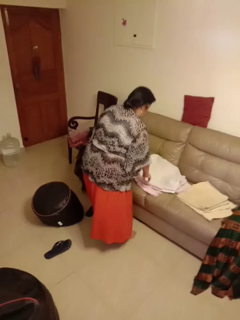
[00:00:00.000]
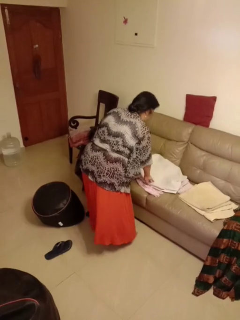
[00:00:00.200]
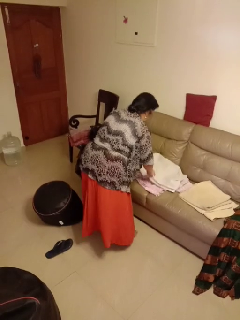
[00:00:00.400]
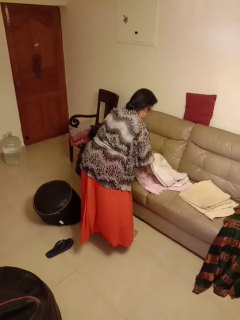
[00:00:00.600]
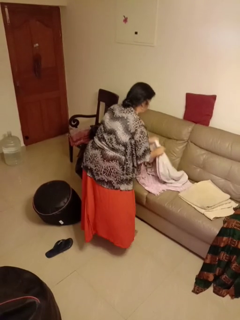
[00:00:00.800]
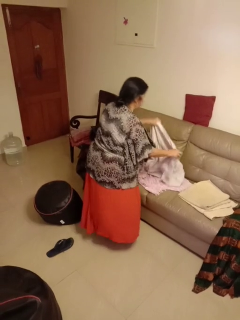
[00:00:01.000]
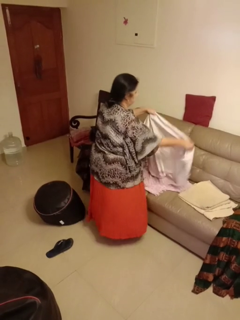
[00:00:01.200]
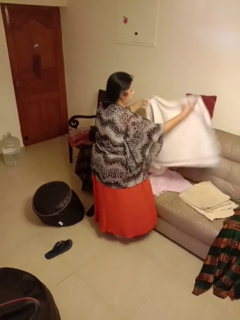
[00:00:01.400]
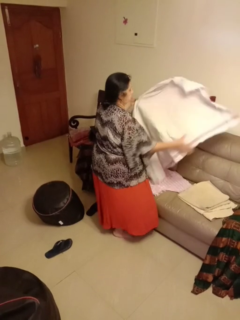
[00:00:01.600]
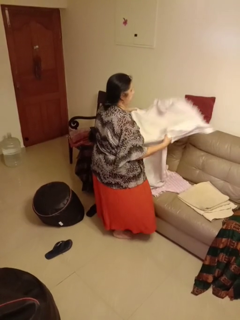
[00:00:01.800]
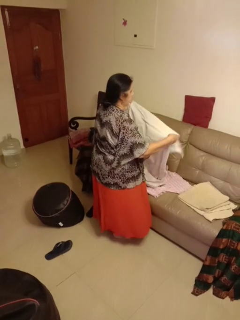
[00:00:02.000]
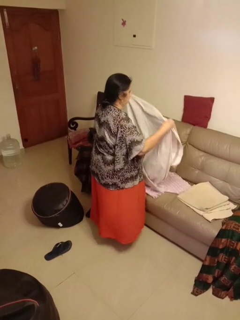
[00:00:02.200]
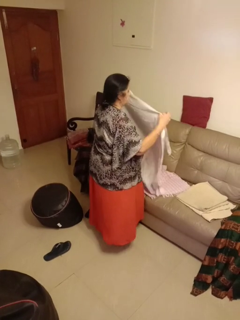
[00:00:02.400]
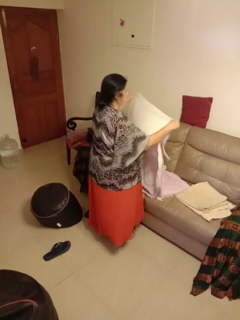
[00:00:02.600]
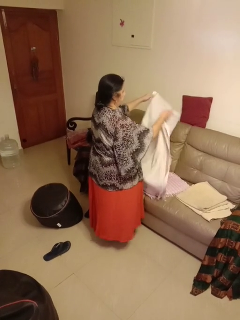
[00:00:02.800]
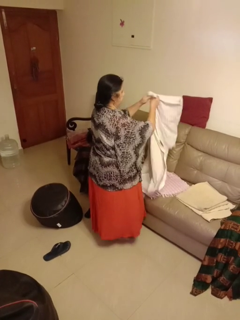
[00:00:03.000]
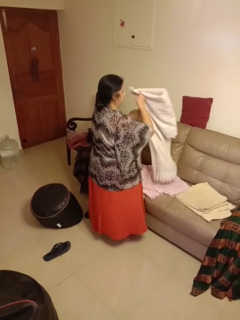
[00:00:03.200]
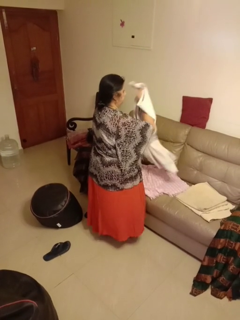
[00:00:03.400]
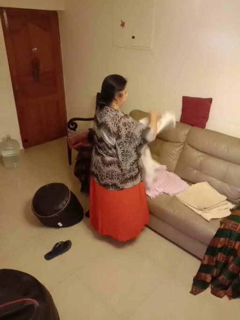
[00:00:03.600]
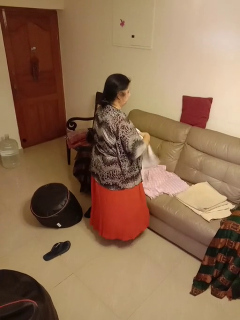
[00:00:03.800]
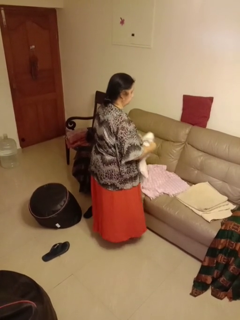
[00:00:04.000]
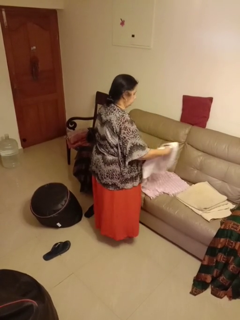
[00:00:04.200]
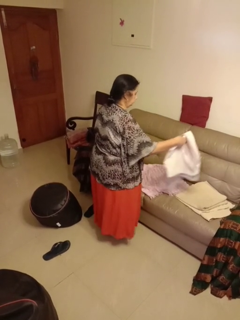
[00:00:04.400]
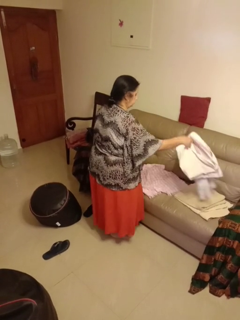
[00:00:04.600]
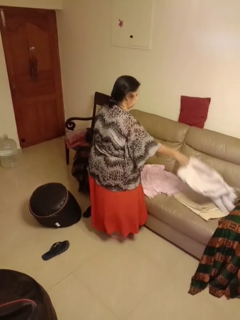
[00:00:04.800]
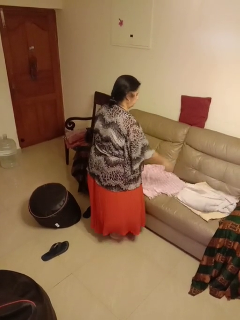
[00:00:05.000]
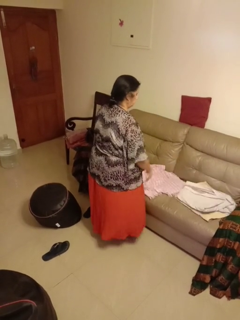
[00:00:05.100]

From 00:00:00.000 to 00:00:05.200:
person folds towel

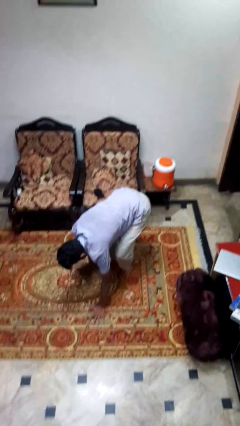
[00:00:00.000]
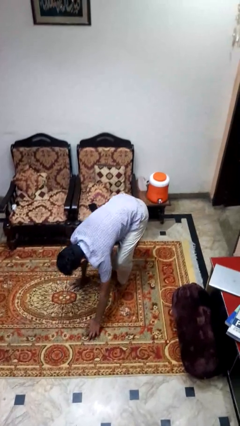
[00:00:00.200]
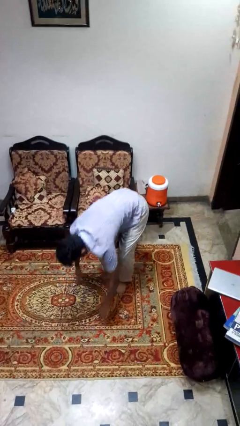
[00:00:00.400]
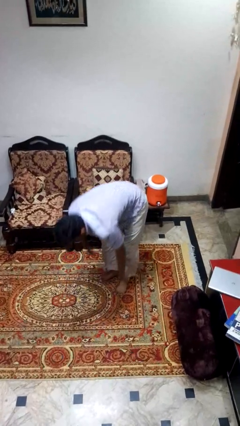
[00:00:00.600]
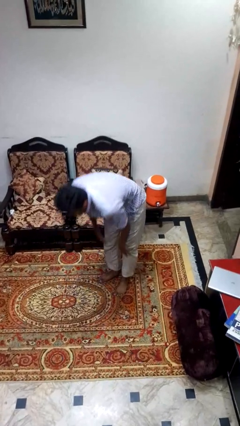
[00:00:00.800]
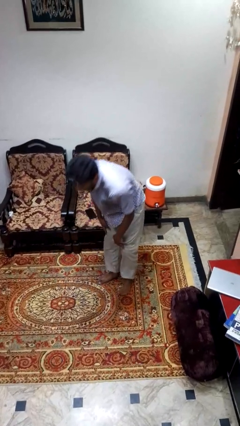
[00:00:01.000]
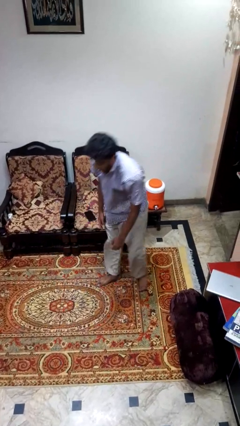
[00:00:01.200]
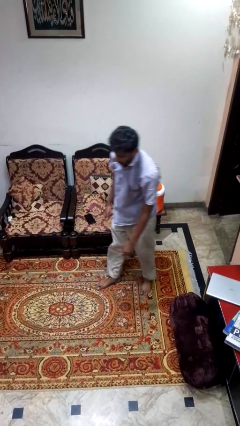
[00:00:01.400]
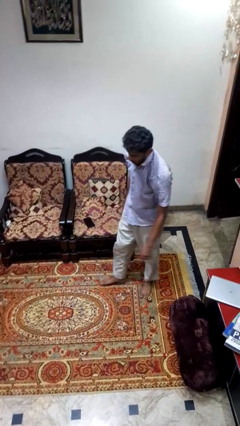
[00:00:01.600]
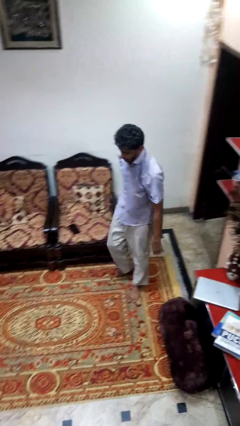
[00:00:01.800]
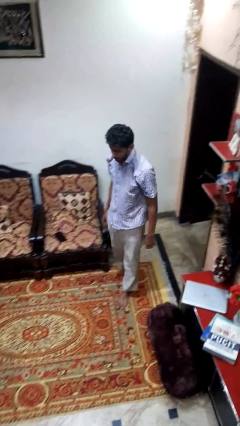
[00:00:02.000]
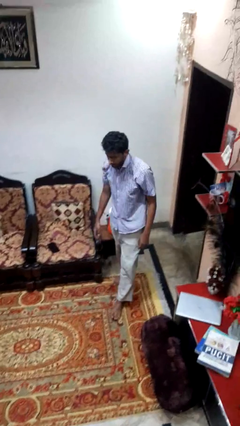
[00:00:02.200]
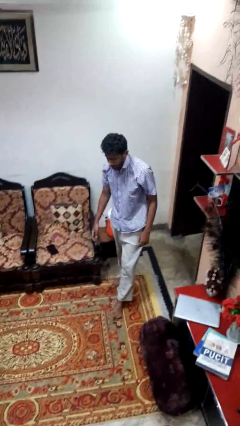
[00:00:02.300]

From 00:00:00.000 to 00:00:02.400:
person stands up from floor

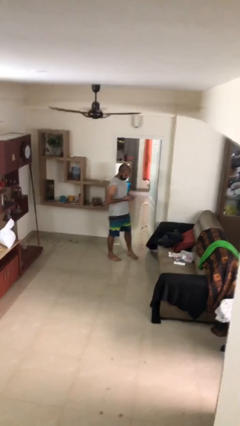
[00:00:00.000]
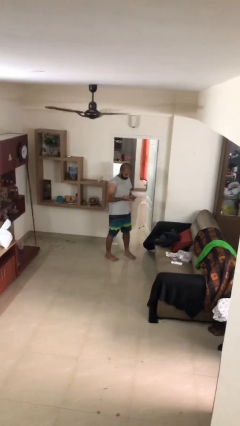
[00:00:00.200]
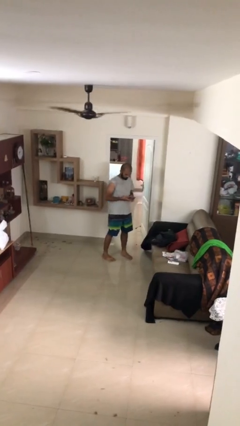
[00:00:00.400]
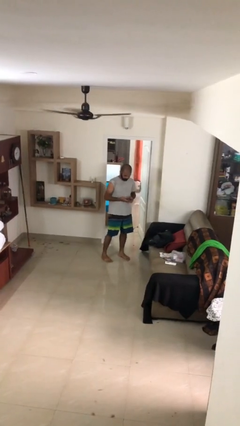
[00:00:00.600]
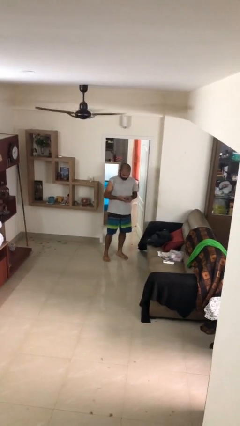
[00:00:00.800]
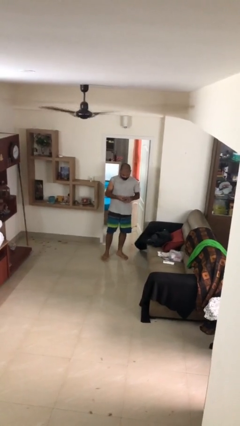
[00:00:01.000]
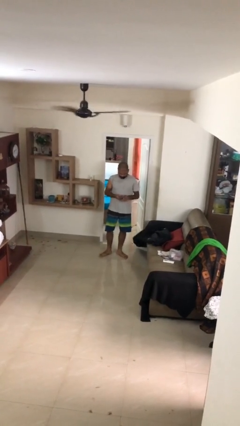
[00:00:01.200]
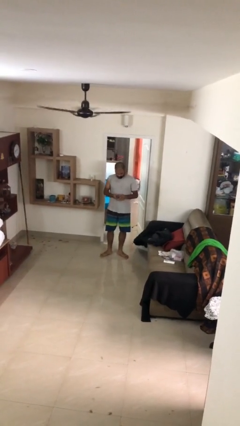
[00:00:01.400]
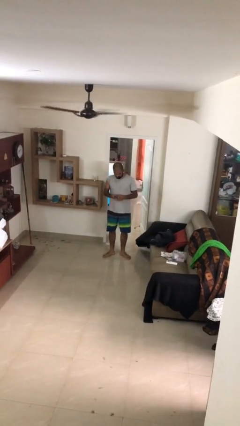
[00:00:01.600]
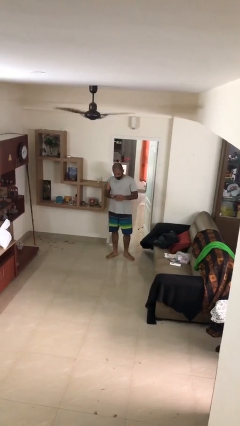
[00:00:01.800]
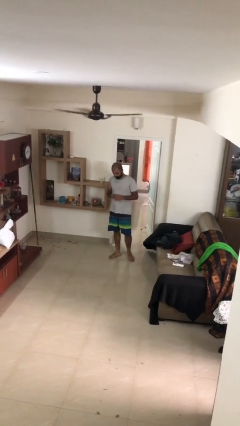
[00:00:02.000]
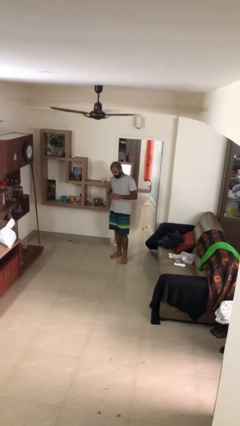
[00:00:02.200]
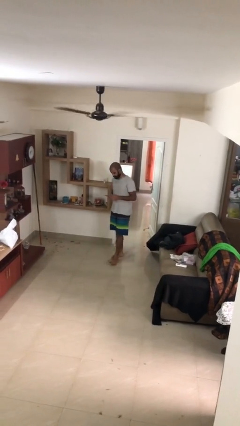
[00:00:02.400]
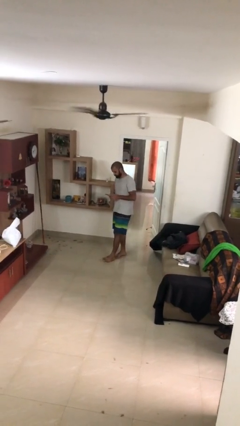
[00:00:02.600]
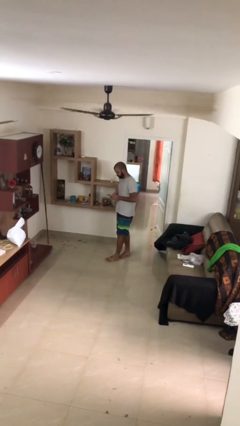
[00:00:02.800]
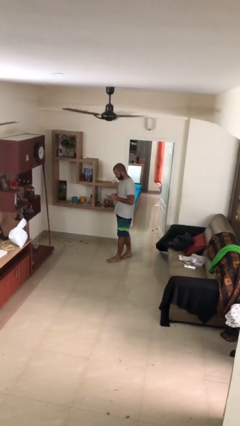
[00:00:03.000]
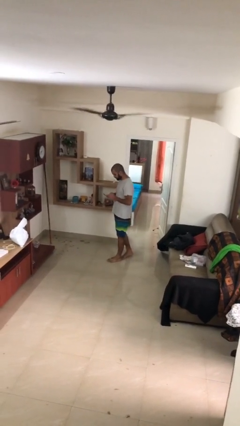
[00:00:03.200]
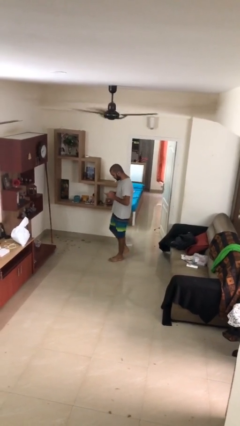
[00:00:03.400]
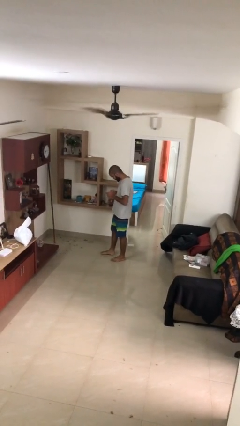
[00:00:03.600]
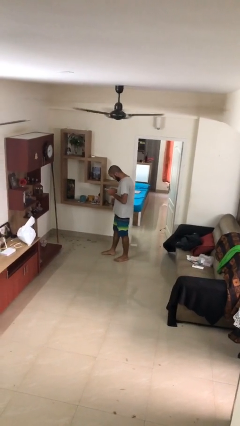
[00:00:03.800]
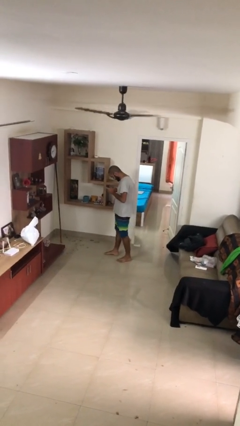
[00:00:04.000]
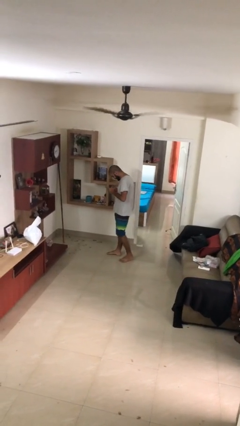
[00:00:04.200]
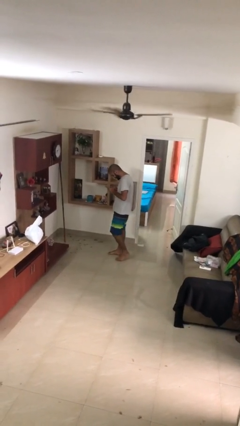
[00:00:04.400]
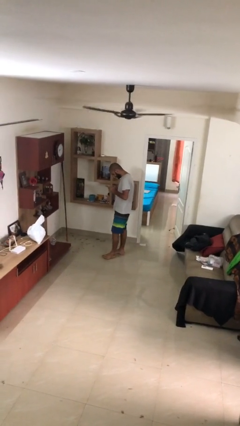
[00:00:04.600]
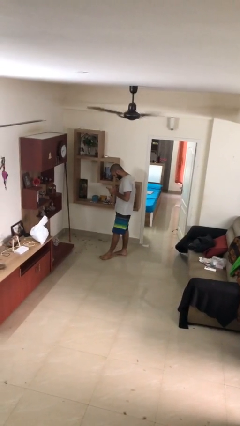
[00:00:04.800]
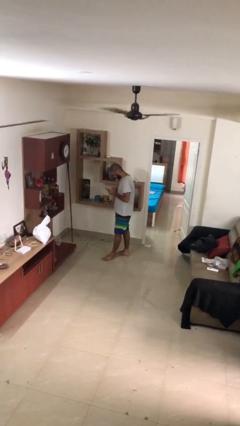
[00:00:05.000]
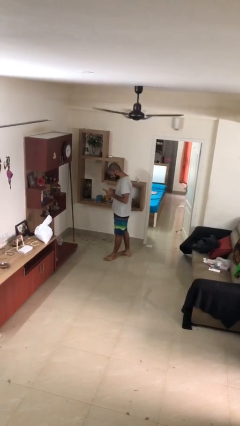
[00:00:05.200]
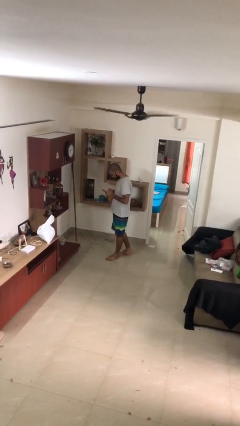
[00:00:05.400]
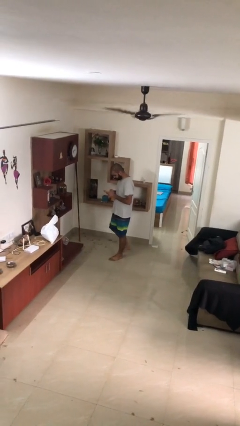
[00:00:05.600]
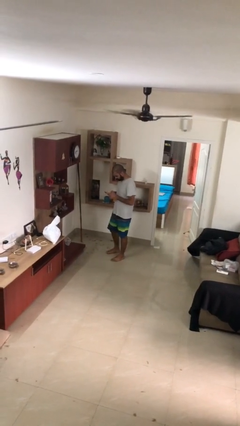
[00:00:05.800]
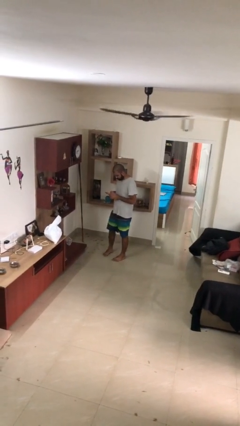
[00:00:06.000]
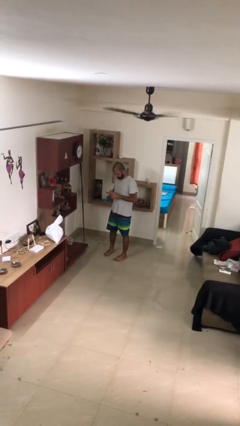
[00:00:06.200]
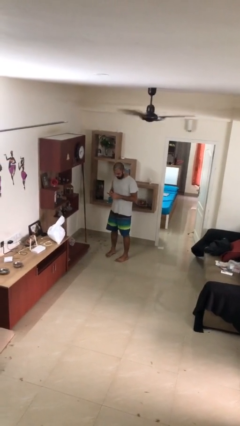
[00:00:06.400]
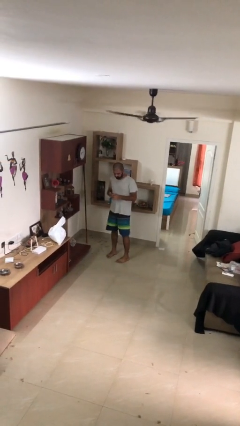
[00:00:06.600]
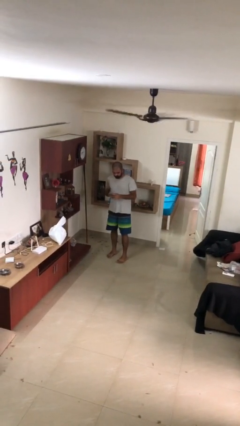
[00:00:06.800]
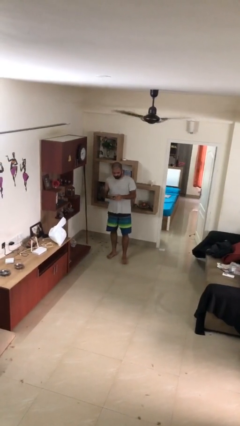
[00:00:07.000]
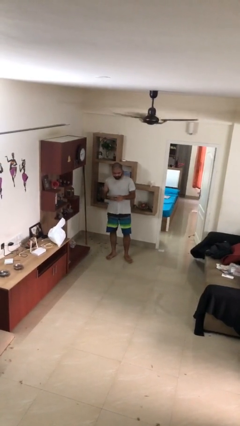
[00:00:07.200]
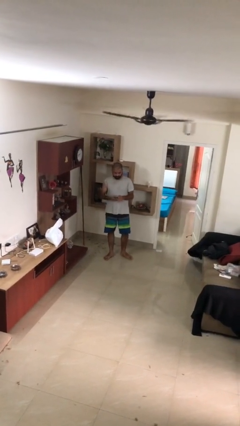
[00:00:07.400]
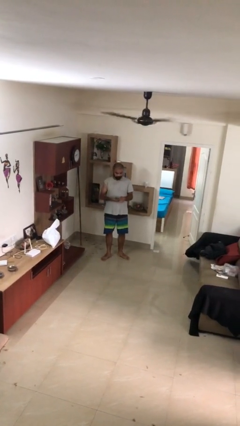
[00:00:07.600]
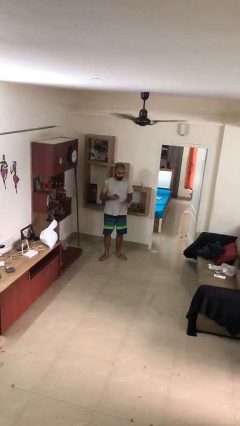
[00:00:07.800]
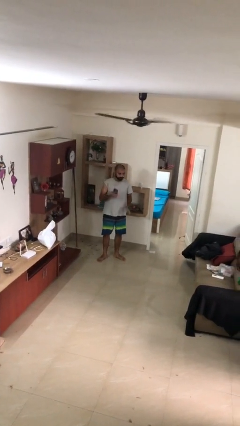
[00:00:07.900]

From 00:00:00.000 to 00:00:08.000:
person texts on phone

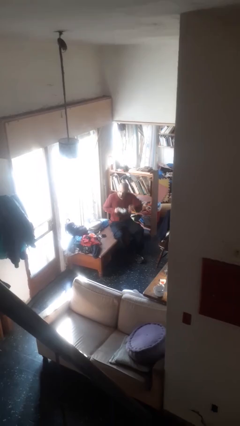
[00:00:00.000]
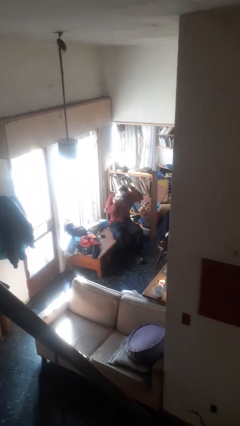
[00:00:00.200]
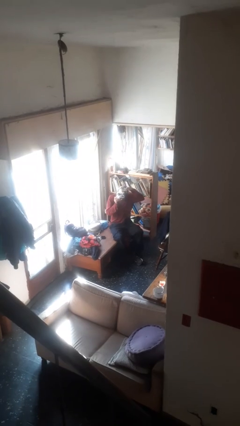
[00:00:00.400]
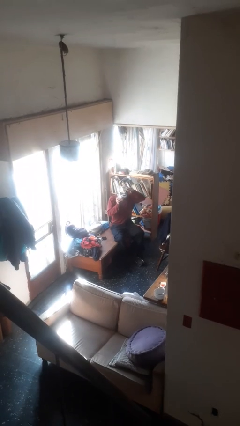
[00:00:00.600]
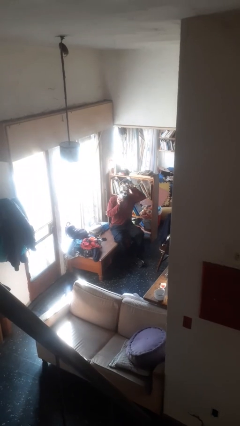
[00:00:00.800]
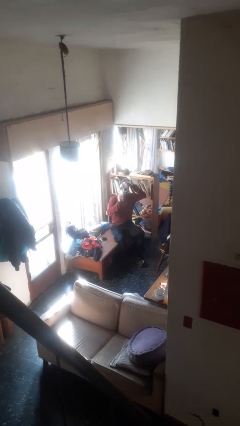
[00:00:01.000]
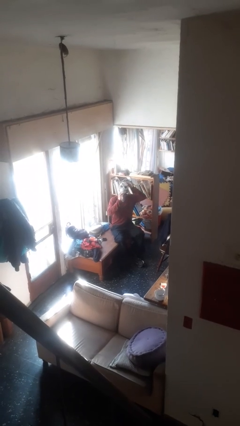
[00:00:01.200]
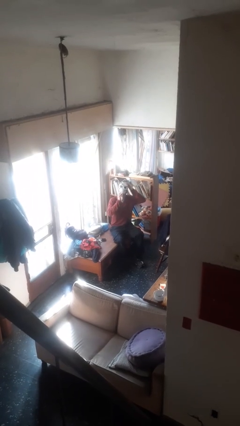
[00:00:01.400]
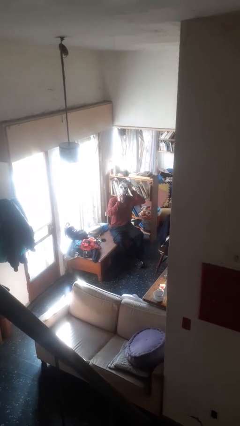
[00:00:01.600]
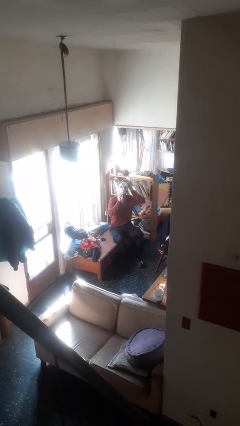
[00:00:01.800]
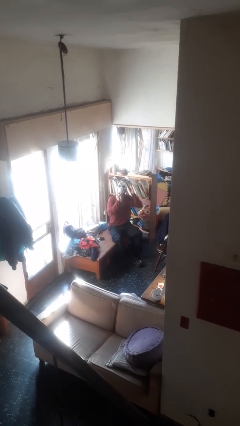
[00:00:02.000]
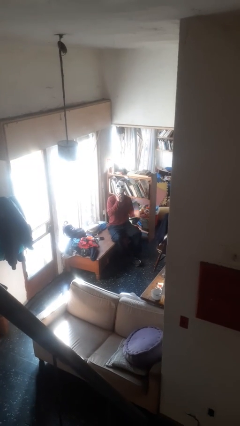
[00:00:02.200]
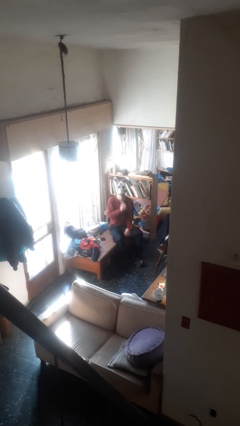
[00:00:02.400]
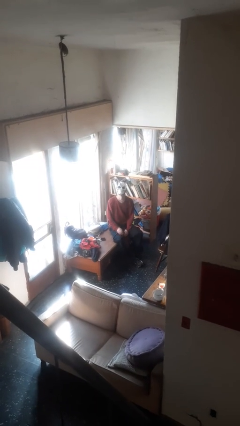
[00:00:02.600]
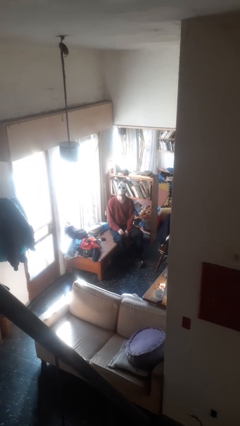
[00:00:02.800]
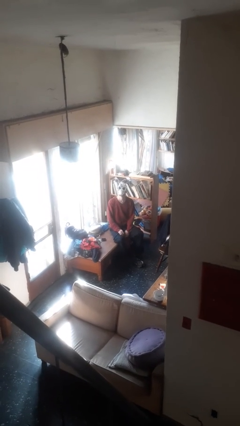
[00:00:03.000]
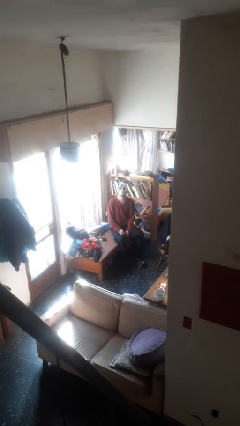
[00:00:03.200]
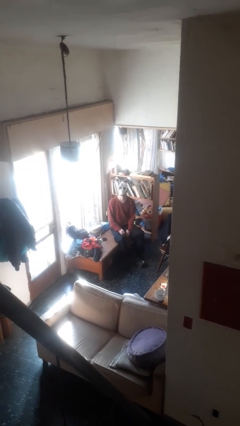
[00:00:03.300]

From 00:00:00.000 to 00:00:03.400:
person puts on facemask
